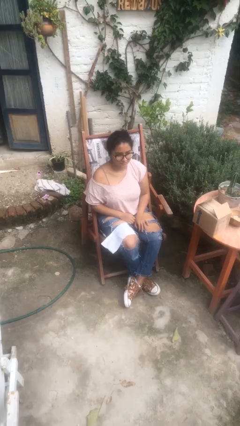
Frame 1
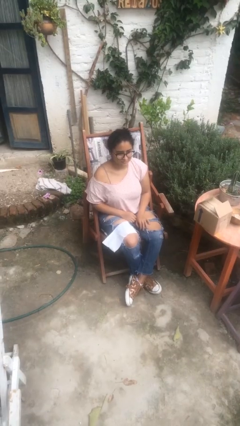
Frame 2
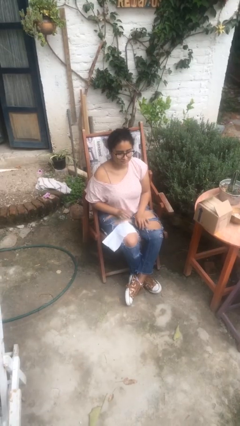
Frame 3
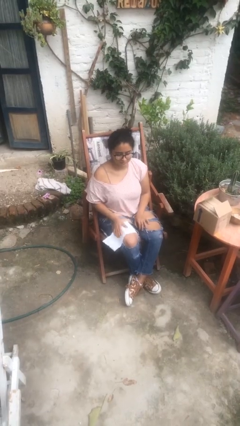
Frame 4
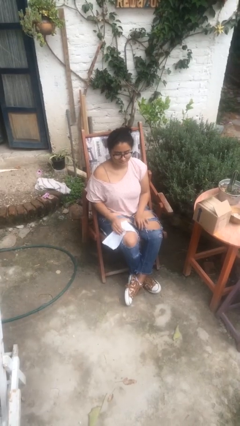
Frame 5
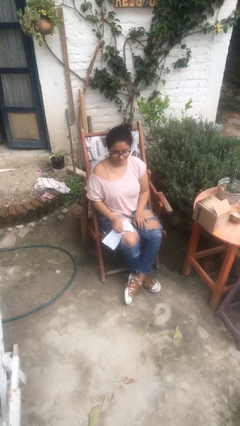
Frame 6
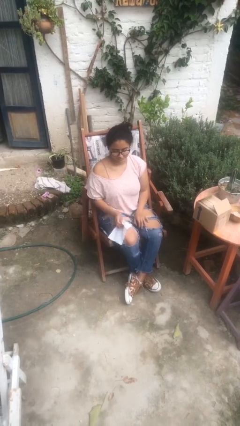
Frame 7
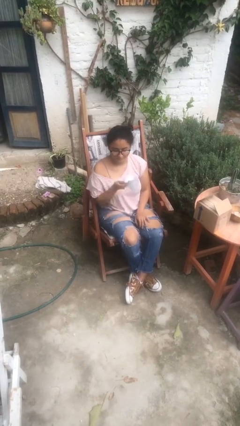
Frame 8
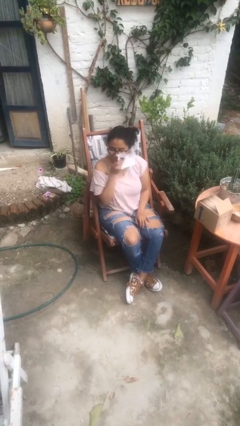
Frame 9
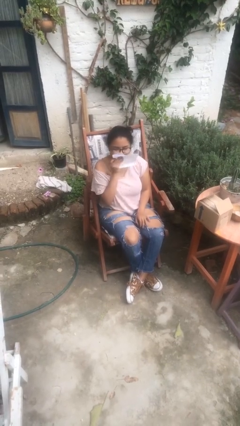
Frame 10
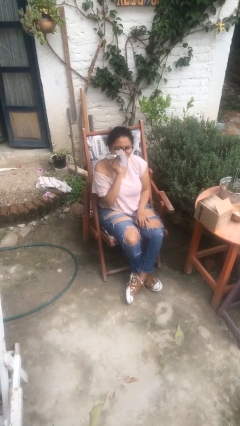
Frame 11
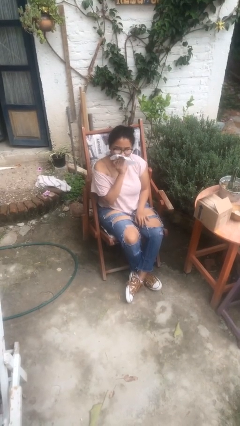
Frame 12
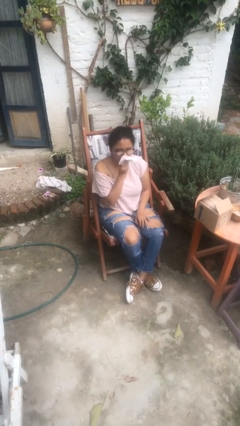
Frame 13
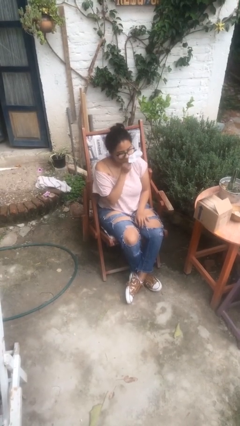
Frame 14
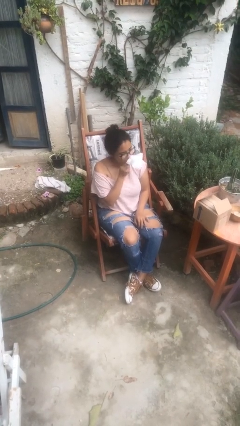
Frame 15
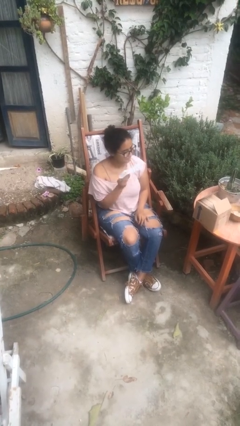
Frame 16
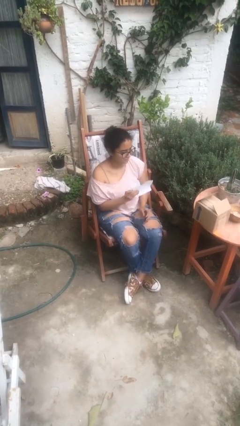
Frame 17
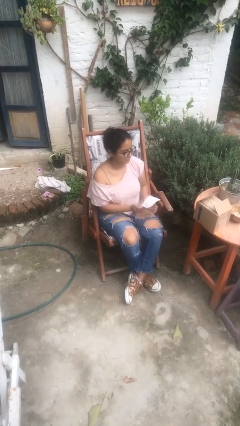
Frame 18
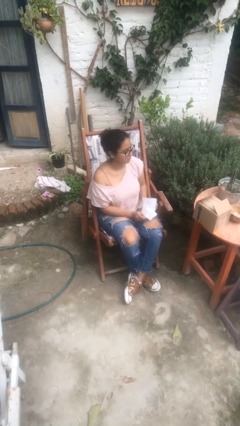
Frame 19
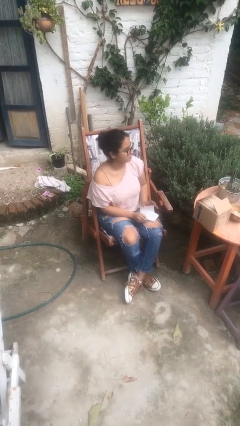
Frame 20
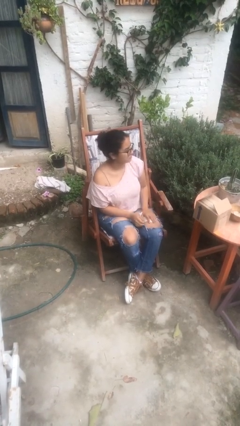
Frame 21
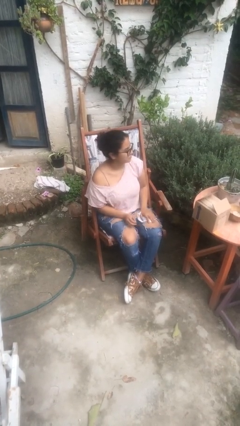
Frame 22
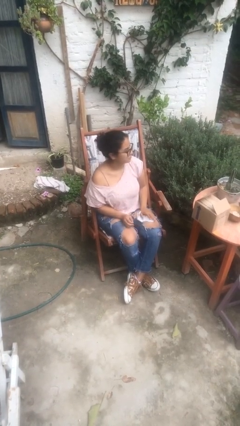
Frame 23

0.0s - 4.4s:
person wipes mouth with napkin

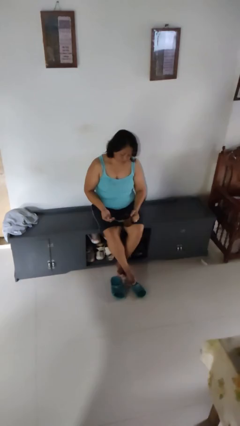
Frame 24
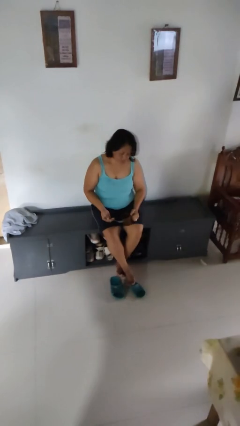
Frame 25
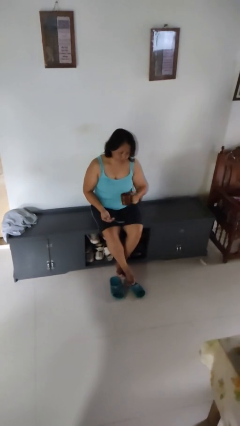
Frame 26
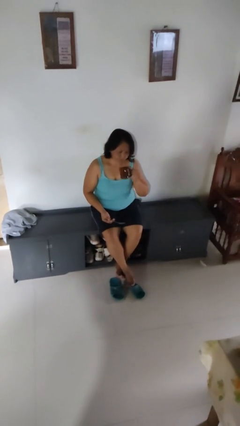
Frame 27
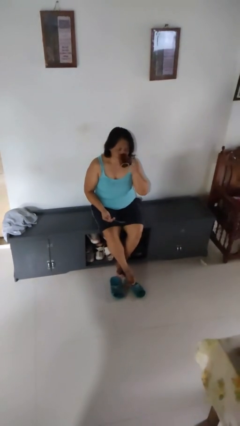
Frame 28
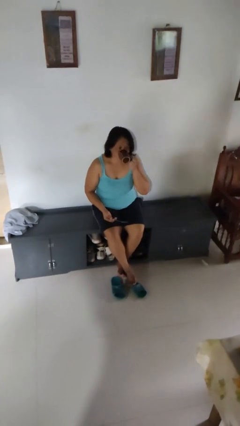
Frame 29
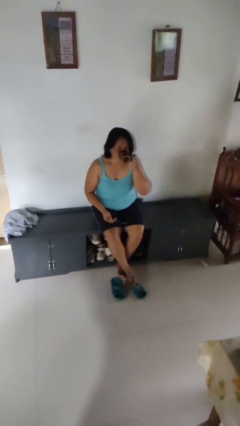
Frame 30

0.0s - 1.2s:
person drinks from mug

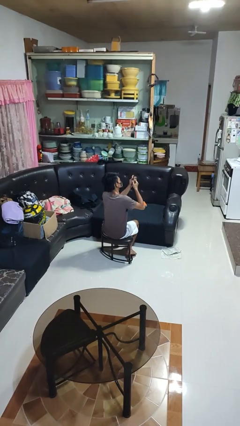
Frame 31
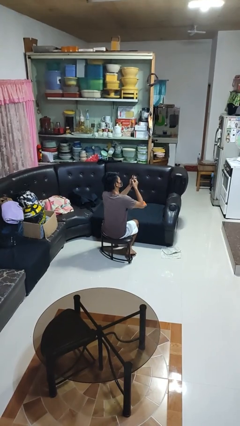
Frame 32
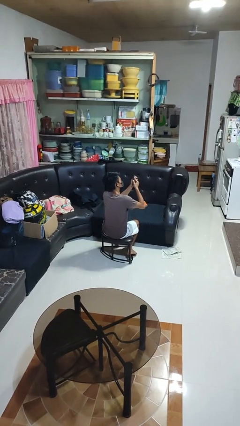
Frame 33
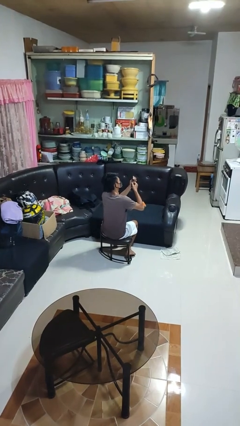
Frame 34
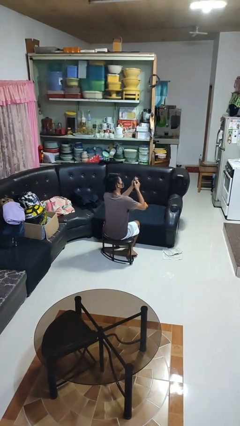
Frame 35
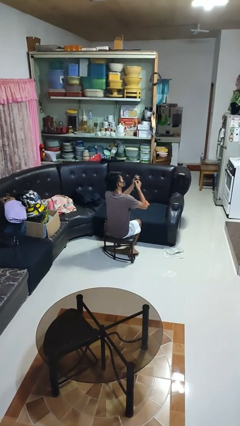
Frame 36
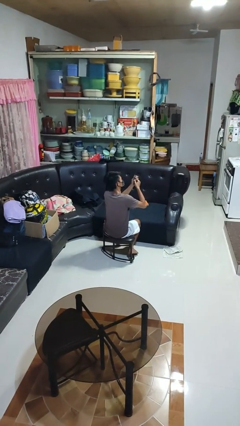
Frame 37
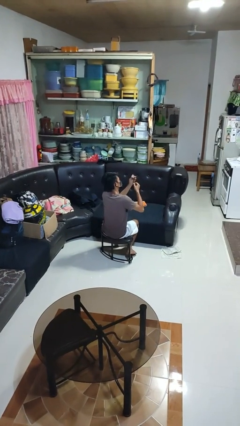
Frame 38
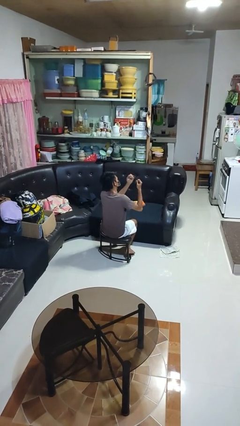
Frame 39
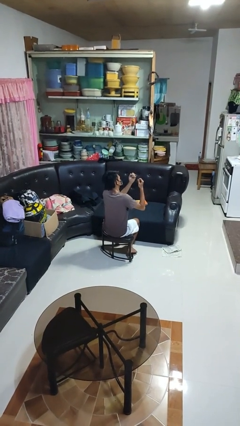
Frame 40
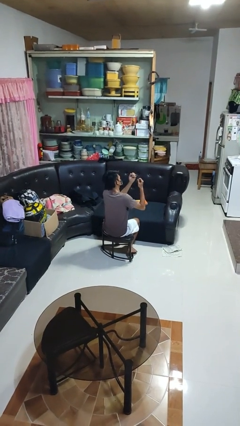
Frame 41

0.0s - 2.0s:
person files fingernails

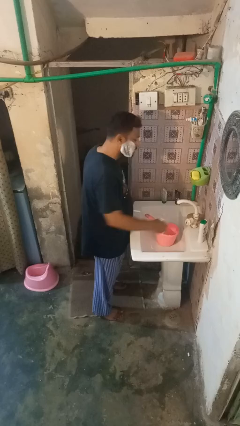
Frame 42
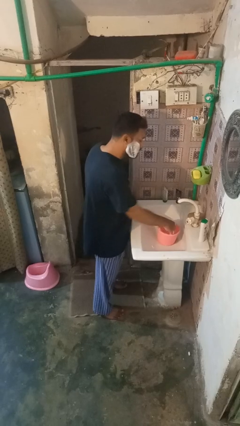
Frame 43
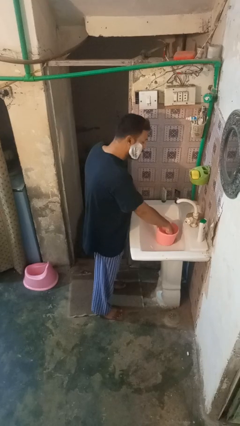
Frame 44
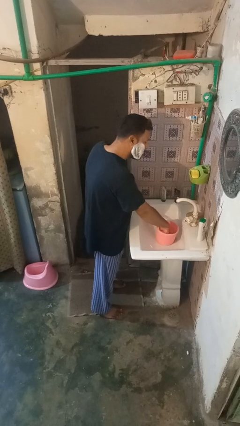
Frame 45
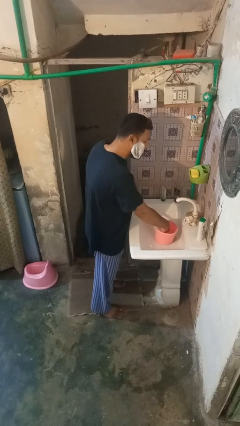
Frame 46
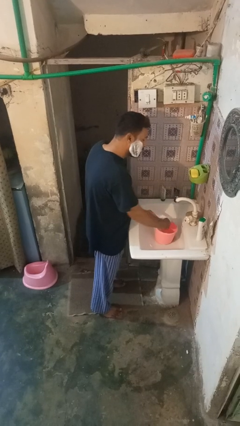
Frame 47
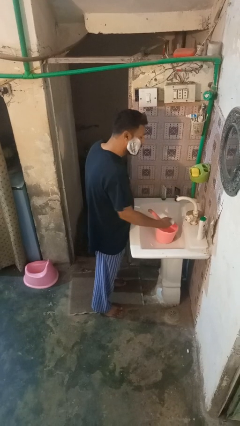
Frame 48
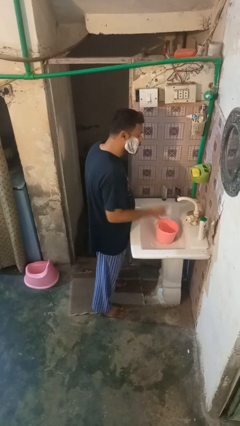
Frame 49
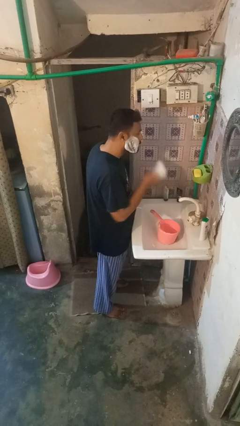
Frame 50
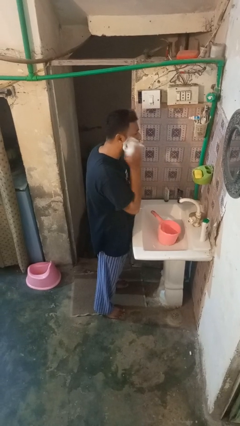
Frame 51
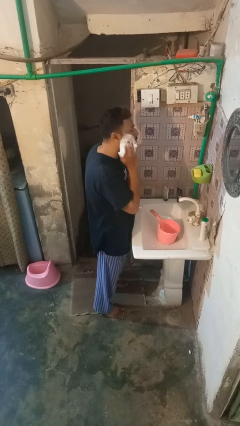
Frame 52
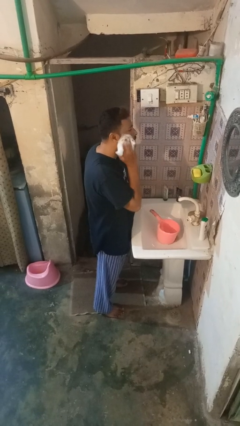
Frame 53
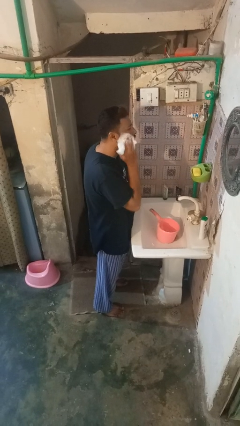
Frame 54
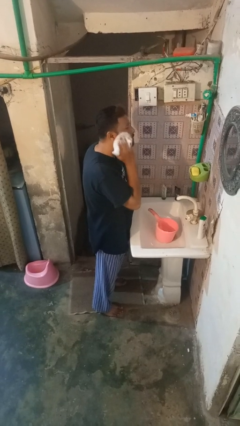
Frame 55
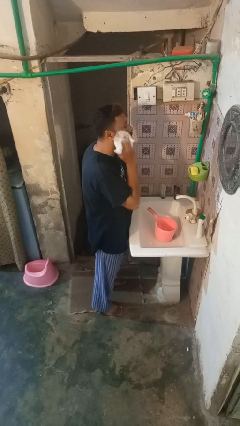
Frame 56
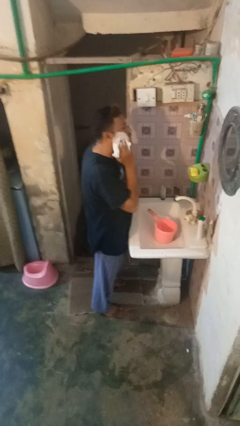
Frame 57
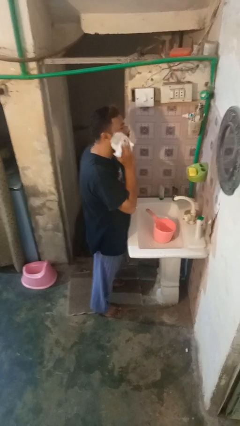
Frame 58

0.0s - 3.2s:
person applies shaving cream

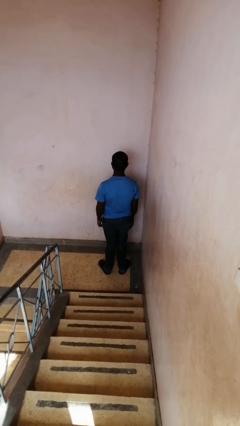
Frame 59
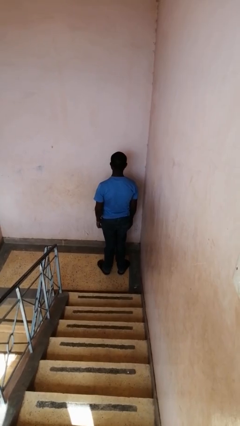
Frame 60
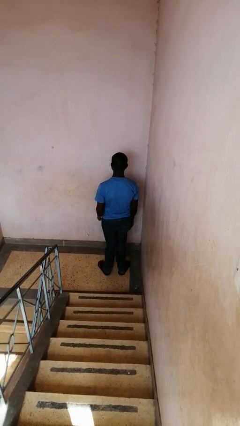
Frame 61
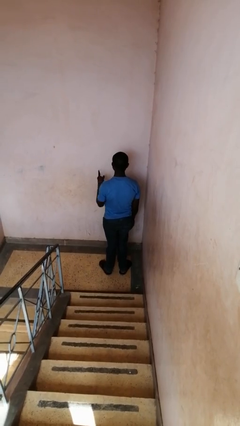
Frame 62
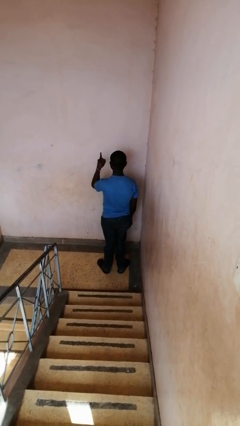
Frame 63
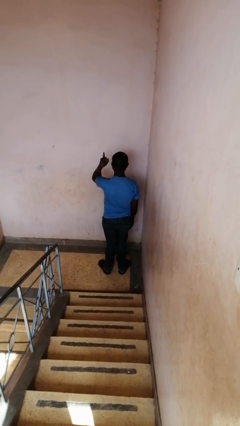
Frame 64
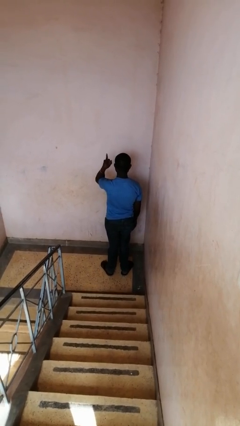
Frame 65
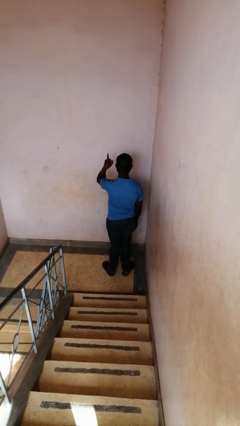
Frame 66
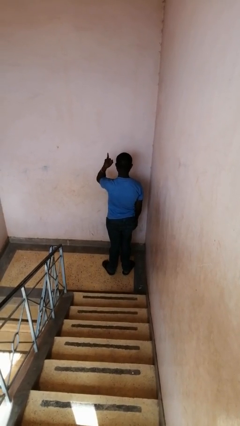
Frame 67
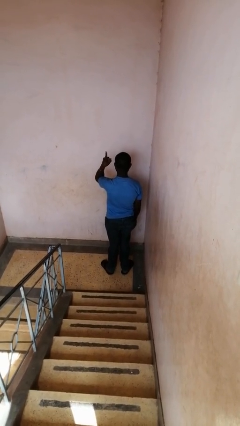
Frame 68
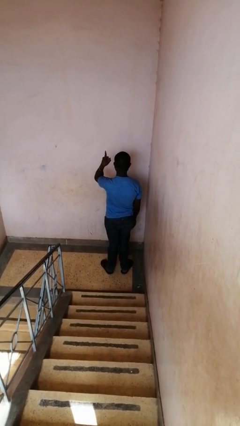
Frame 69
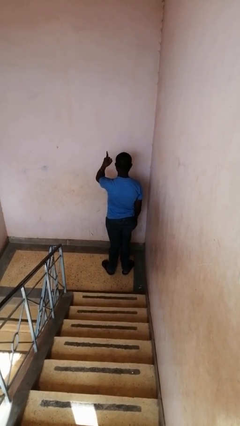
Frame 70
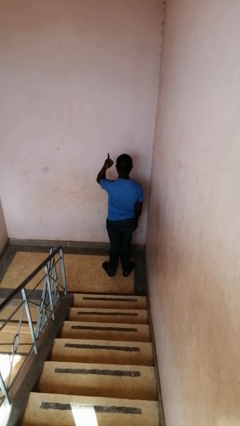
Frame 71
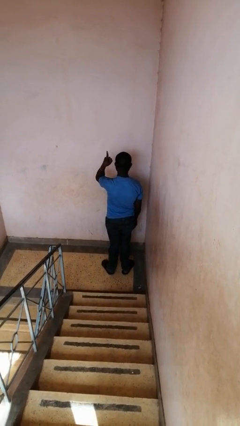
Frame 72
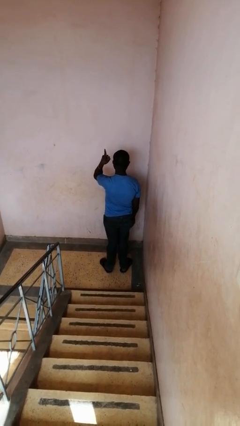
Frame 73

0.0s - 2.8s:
person gestures number one

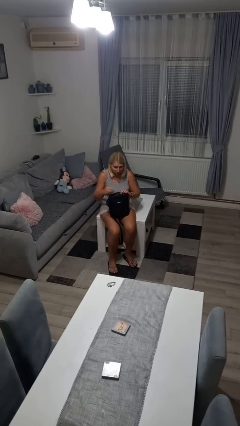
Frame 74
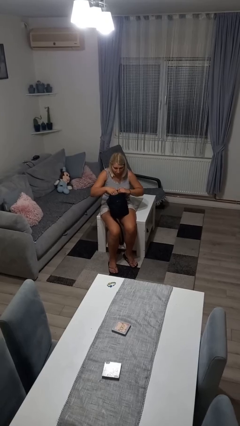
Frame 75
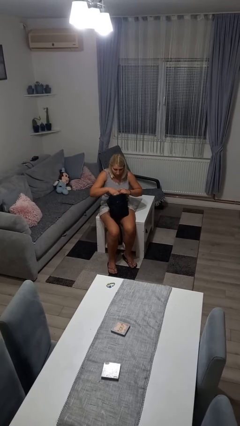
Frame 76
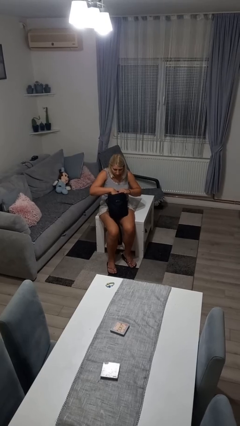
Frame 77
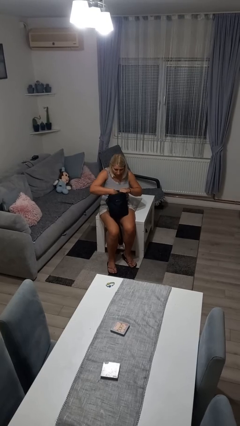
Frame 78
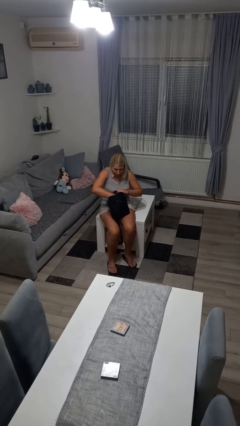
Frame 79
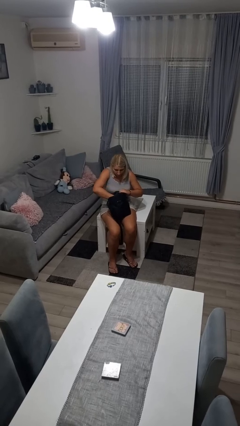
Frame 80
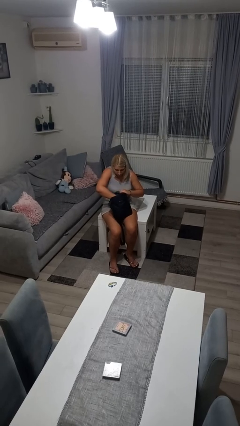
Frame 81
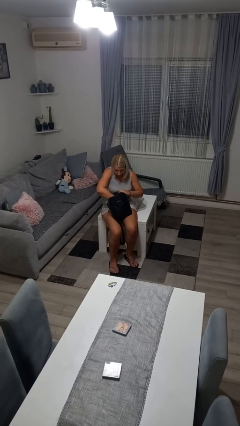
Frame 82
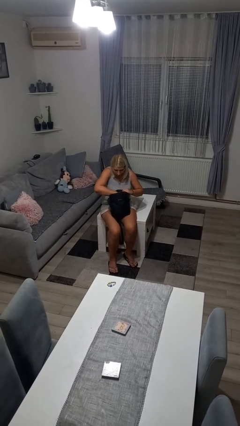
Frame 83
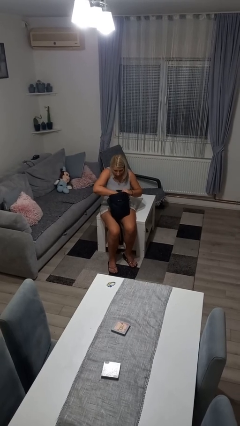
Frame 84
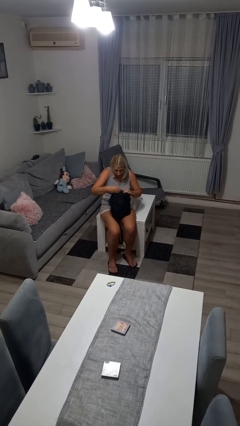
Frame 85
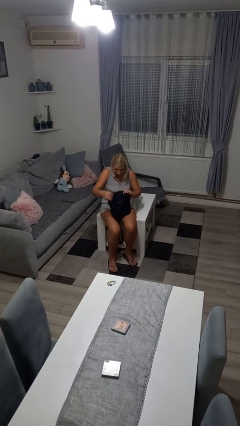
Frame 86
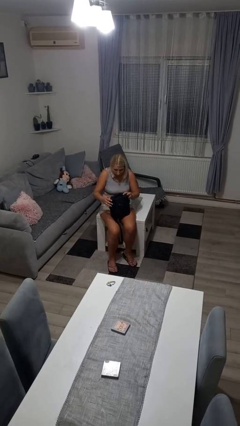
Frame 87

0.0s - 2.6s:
person searches in bag

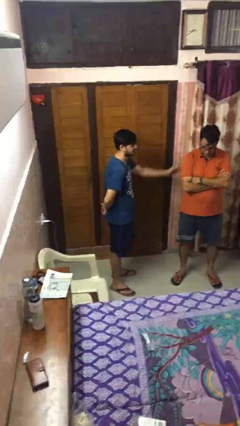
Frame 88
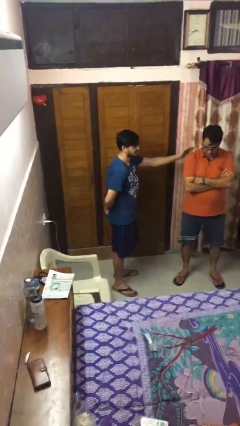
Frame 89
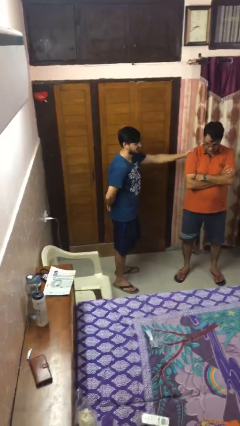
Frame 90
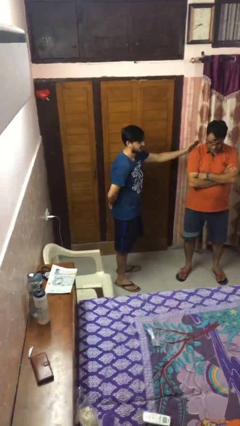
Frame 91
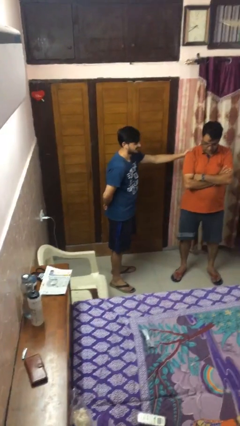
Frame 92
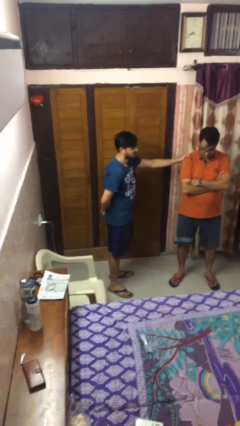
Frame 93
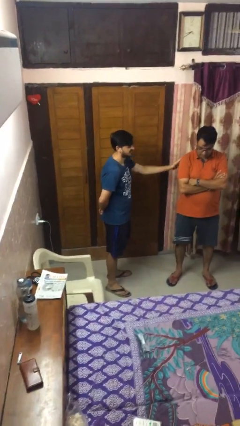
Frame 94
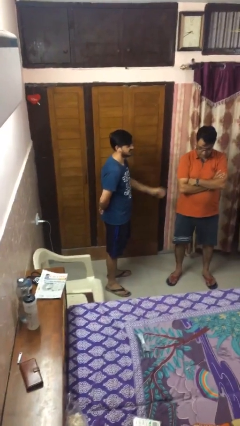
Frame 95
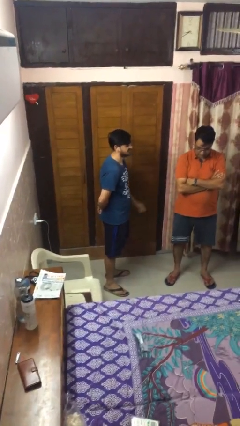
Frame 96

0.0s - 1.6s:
person pounds shoulders of person
